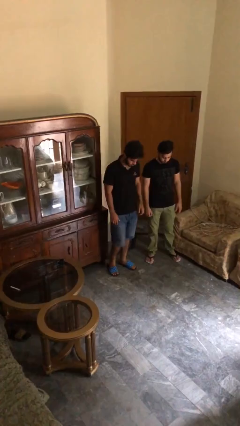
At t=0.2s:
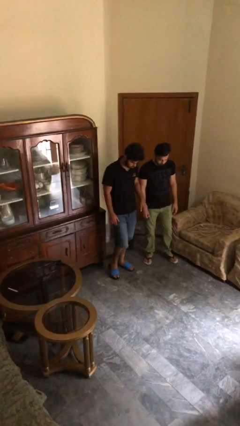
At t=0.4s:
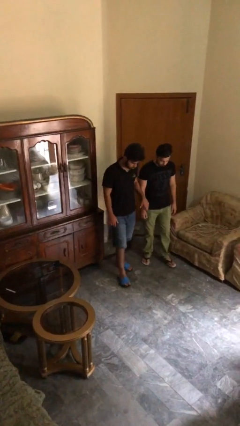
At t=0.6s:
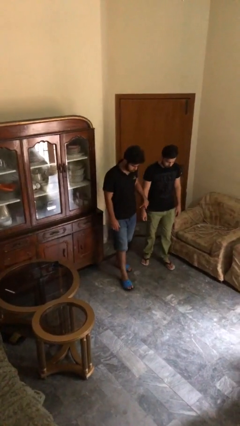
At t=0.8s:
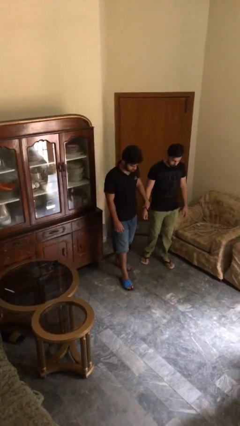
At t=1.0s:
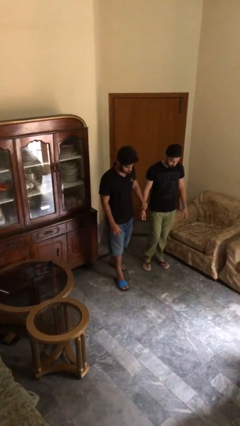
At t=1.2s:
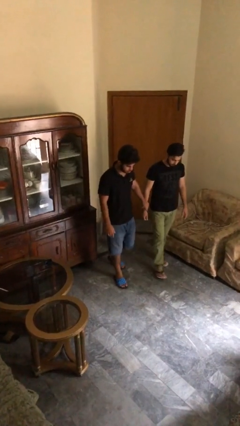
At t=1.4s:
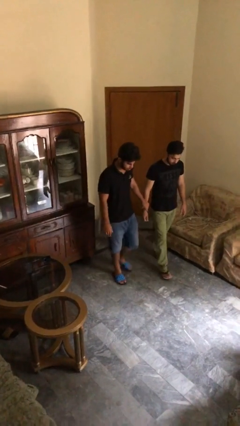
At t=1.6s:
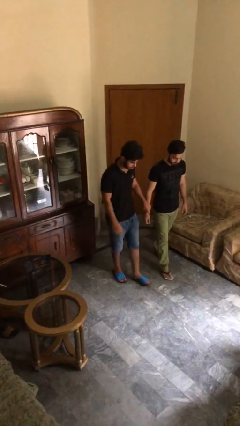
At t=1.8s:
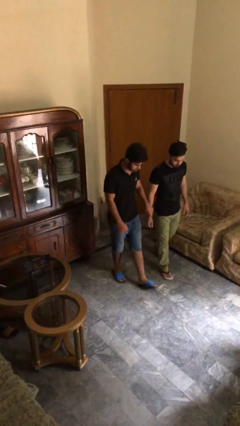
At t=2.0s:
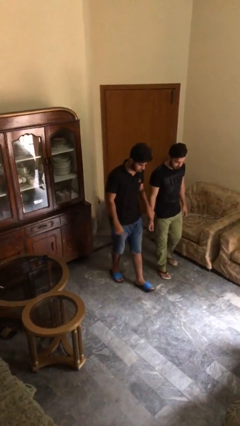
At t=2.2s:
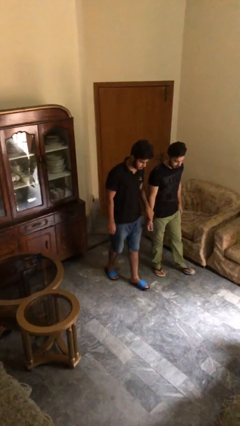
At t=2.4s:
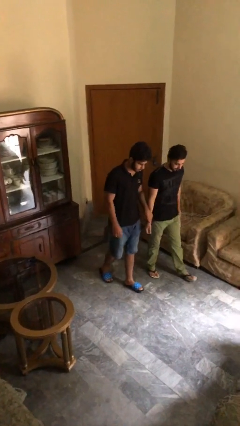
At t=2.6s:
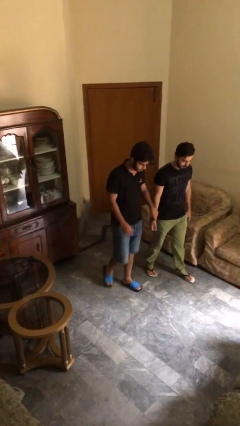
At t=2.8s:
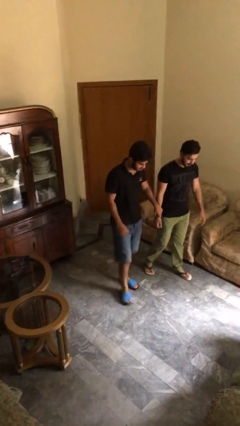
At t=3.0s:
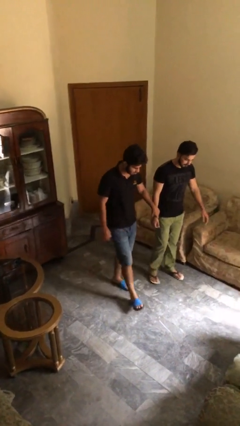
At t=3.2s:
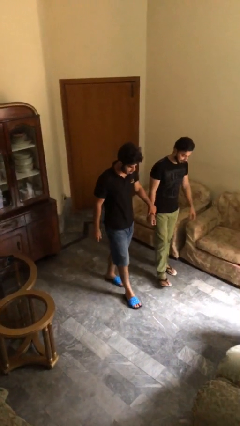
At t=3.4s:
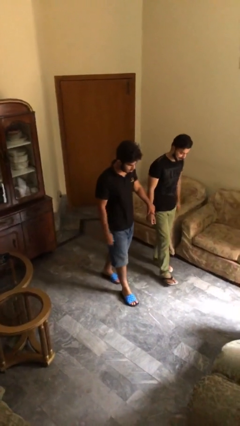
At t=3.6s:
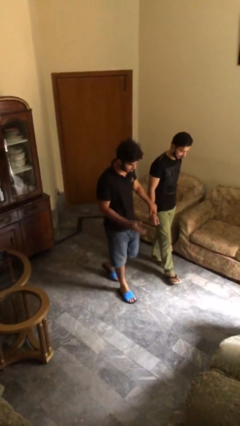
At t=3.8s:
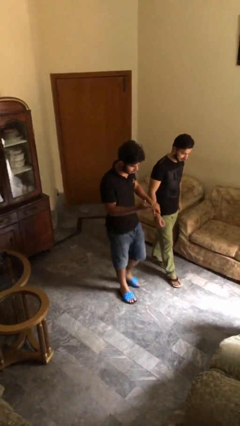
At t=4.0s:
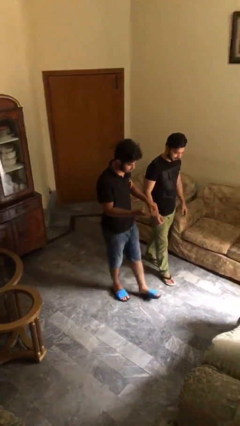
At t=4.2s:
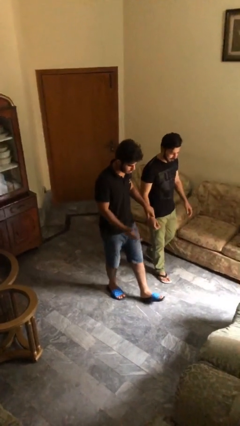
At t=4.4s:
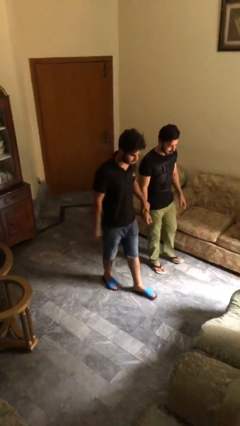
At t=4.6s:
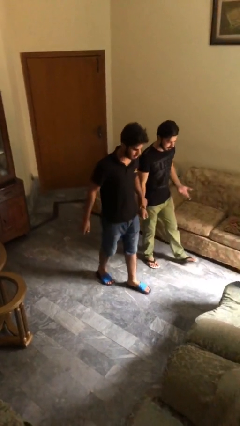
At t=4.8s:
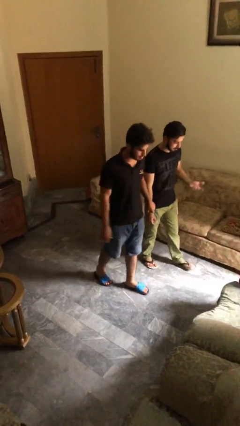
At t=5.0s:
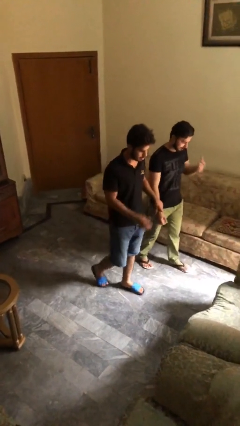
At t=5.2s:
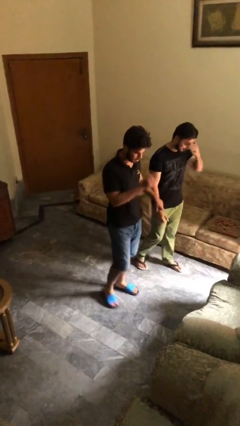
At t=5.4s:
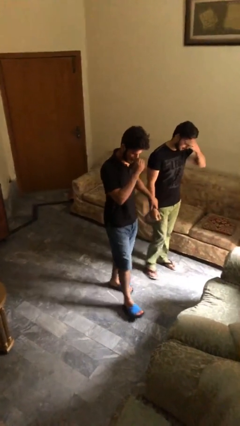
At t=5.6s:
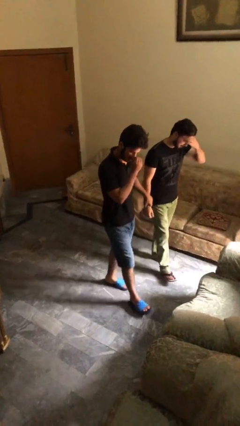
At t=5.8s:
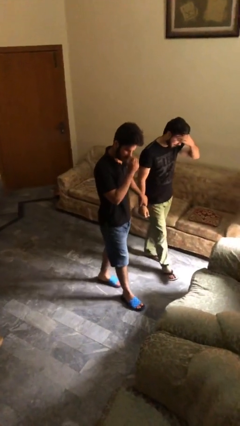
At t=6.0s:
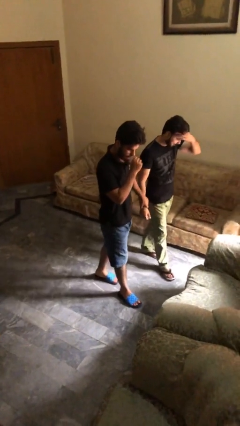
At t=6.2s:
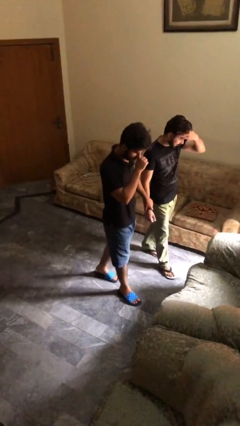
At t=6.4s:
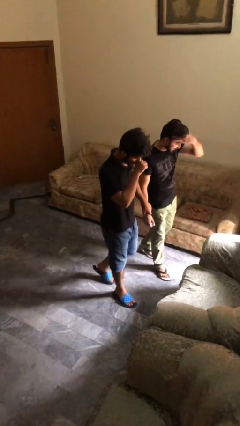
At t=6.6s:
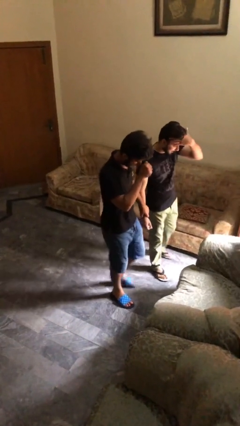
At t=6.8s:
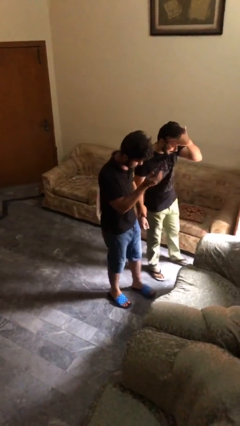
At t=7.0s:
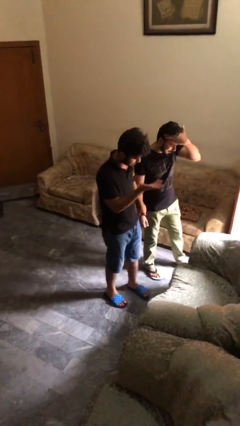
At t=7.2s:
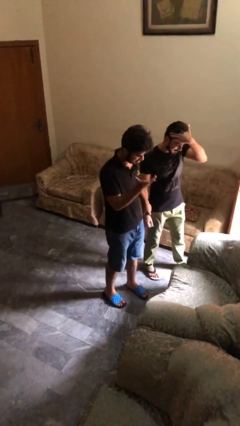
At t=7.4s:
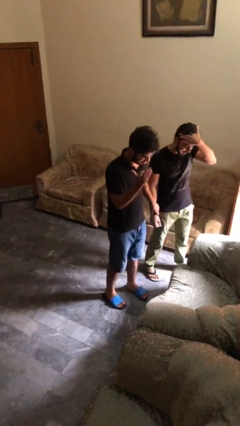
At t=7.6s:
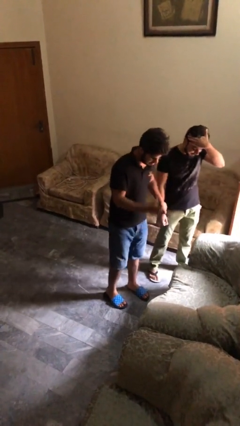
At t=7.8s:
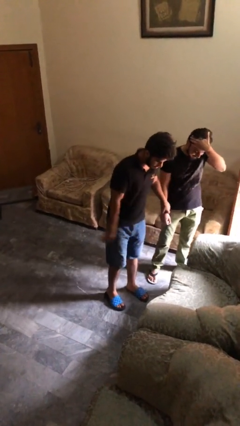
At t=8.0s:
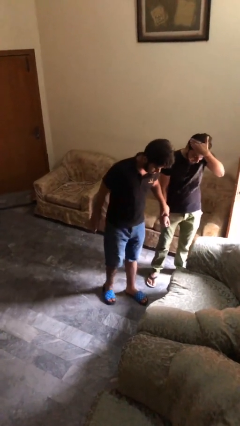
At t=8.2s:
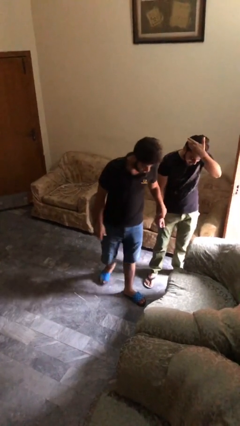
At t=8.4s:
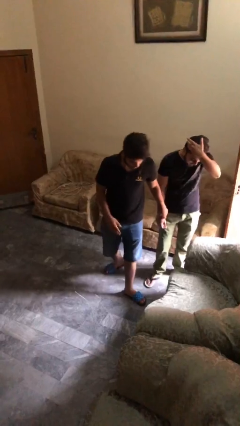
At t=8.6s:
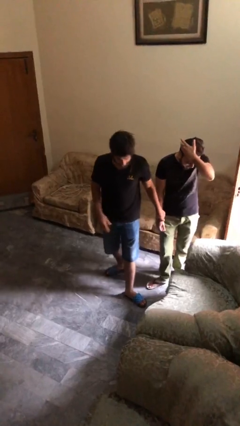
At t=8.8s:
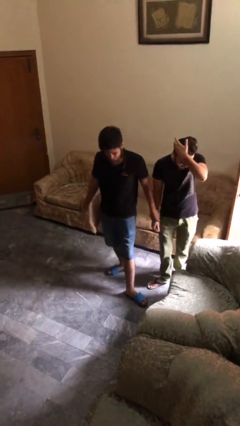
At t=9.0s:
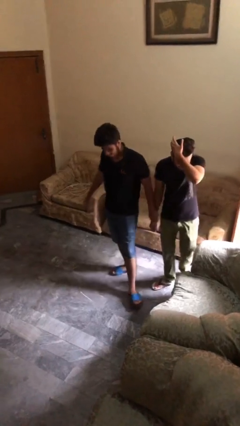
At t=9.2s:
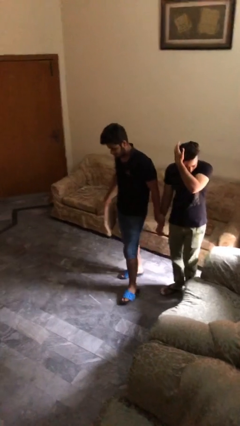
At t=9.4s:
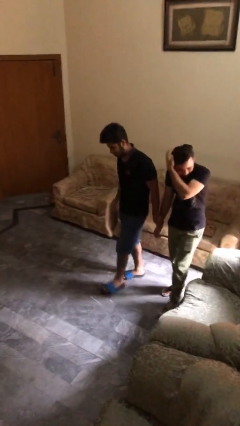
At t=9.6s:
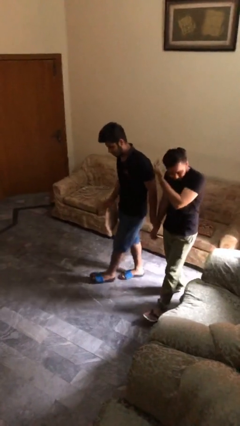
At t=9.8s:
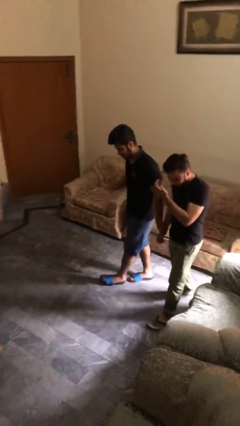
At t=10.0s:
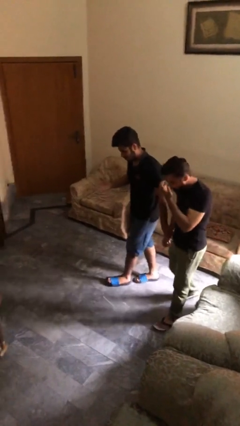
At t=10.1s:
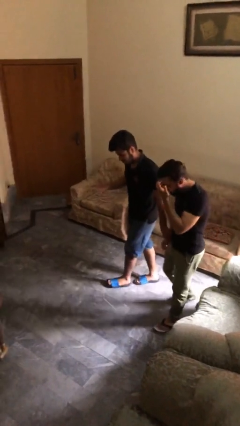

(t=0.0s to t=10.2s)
person holds hand

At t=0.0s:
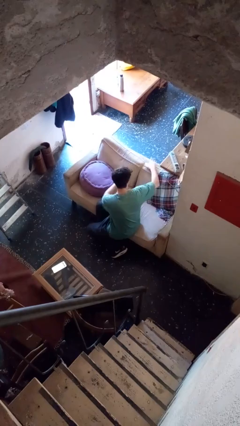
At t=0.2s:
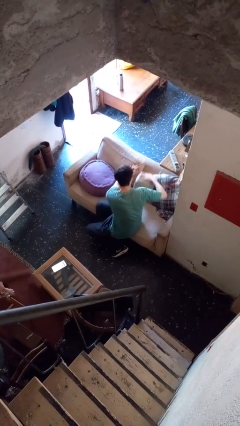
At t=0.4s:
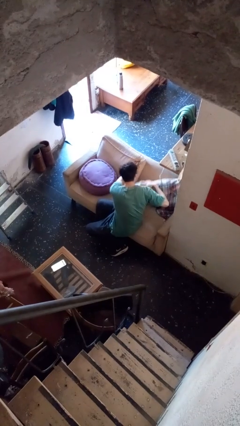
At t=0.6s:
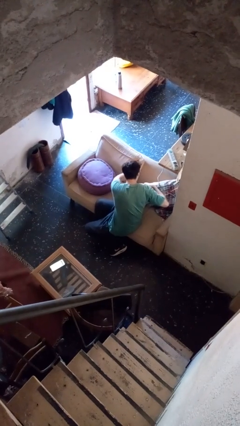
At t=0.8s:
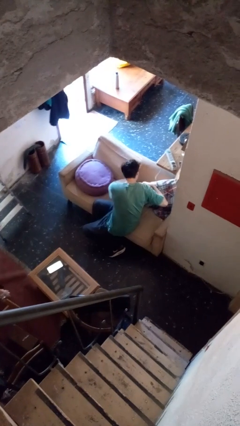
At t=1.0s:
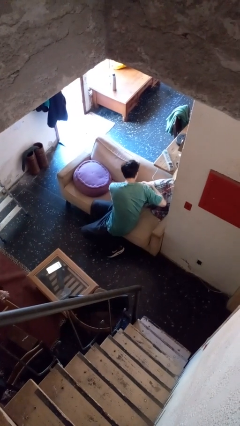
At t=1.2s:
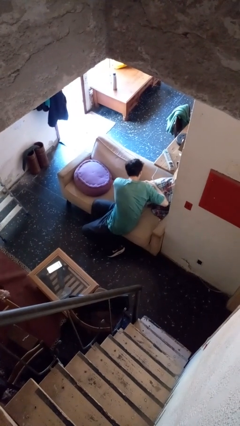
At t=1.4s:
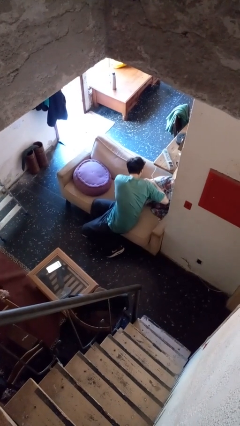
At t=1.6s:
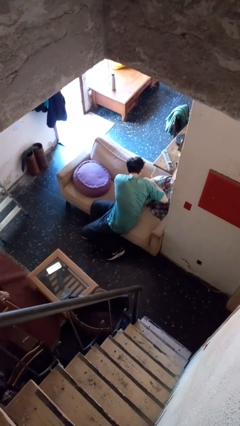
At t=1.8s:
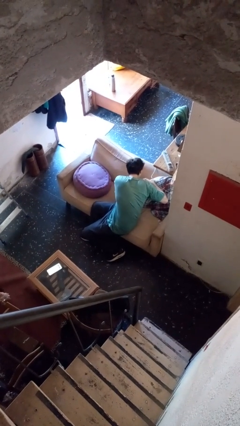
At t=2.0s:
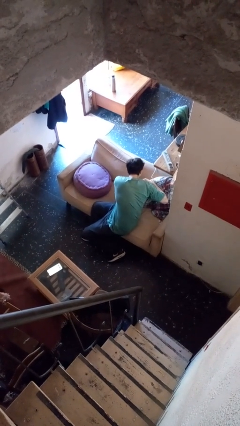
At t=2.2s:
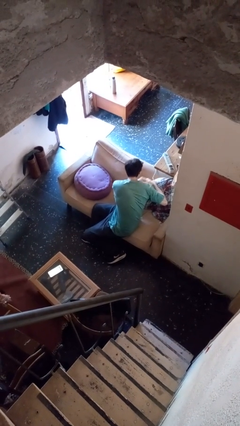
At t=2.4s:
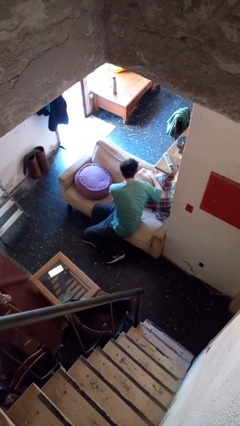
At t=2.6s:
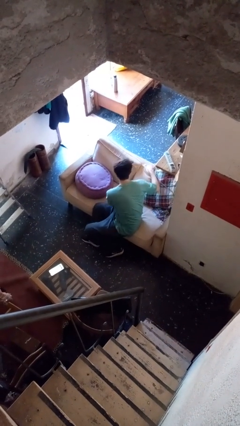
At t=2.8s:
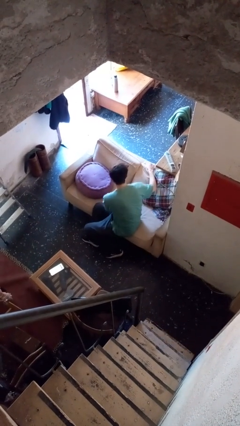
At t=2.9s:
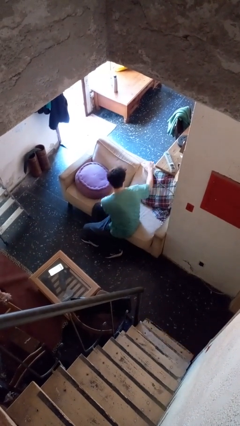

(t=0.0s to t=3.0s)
person searches in couch

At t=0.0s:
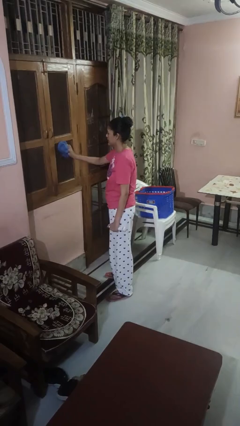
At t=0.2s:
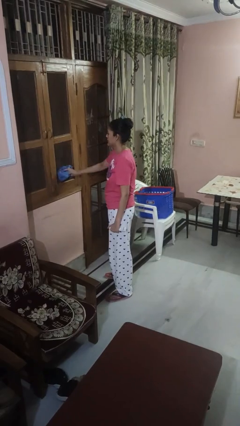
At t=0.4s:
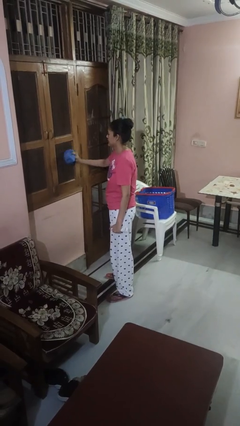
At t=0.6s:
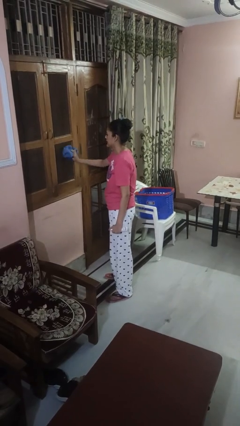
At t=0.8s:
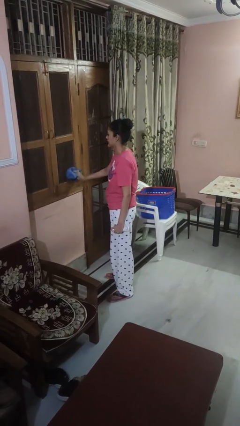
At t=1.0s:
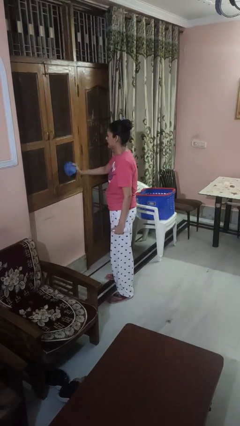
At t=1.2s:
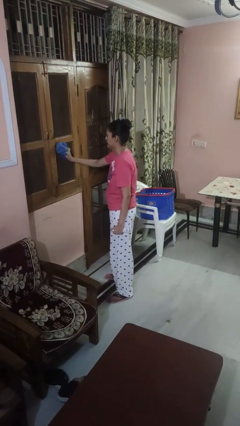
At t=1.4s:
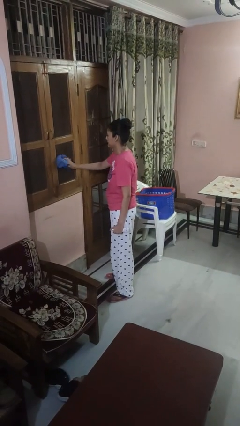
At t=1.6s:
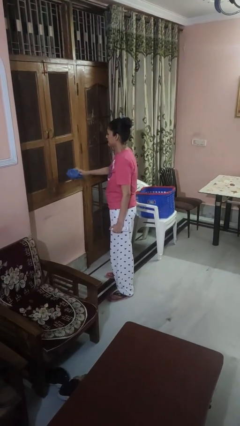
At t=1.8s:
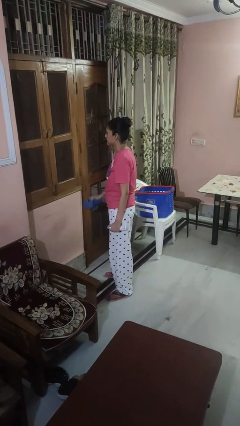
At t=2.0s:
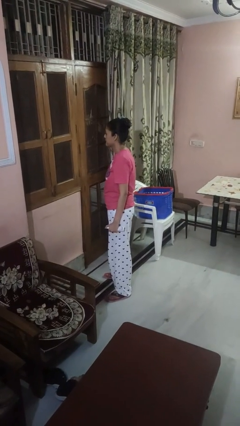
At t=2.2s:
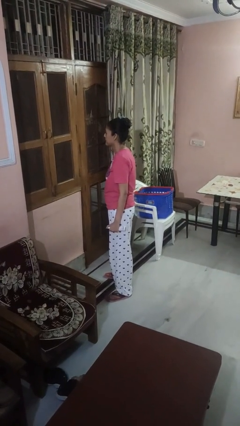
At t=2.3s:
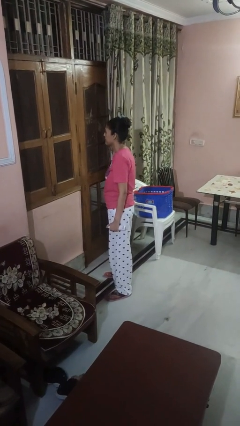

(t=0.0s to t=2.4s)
person washes window

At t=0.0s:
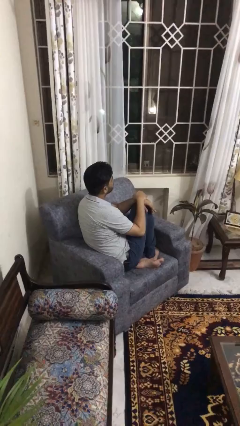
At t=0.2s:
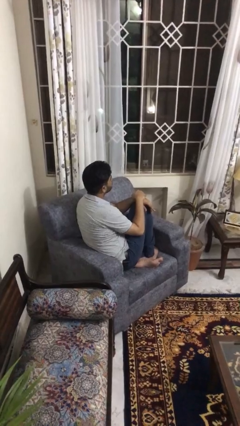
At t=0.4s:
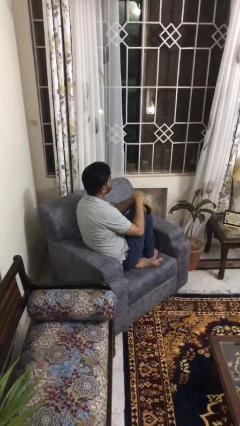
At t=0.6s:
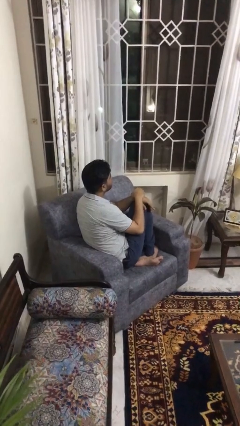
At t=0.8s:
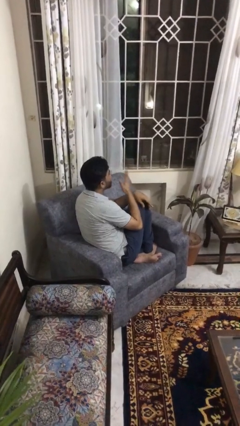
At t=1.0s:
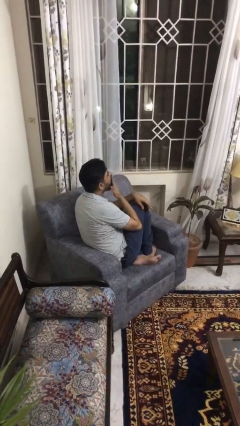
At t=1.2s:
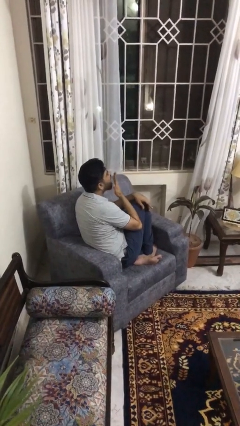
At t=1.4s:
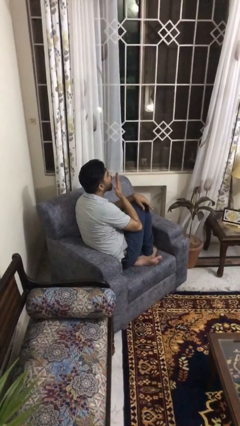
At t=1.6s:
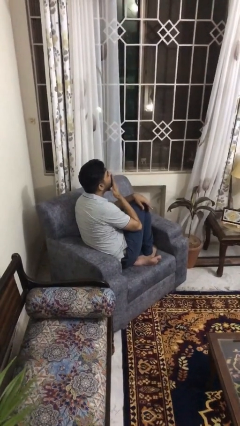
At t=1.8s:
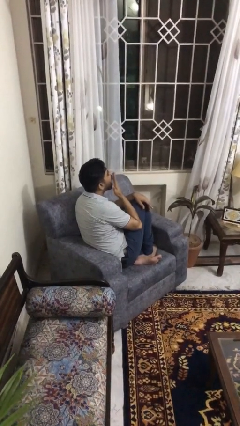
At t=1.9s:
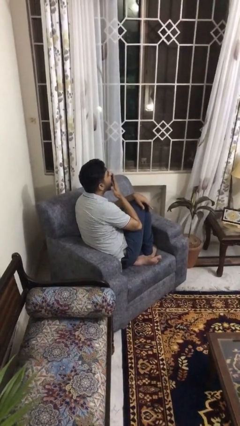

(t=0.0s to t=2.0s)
person yawns

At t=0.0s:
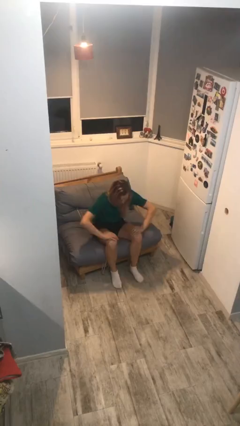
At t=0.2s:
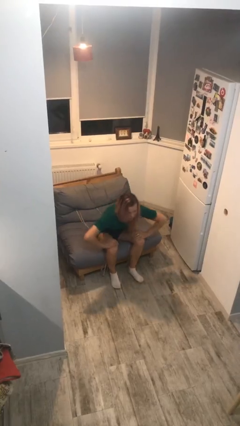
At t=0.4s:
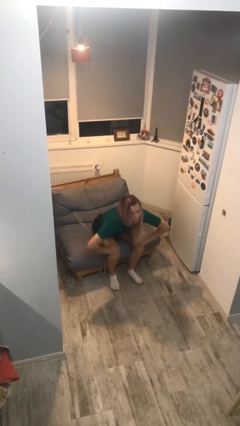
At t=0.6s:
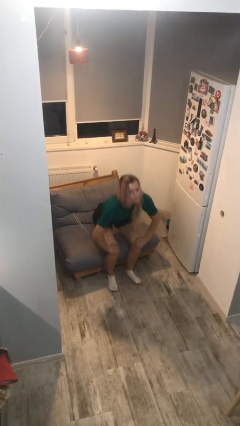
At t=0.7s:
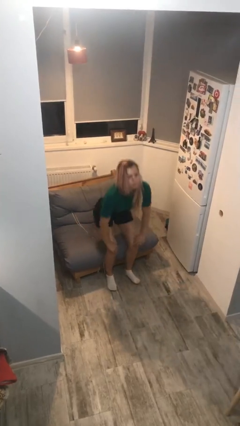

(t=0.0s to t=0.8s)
person stands up
